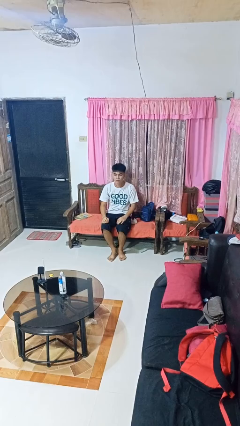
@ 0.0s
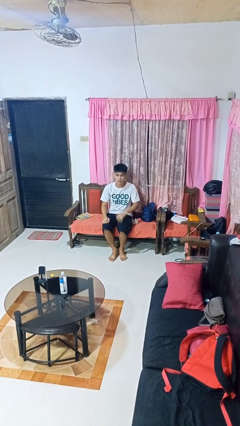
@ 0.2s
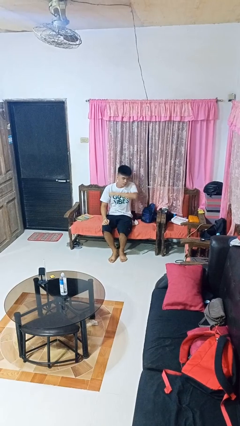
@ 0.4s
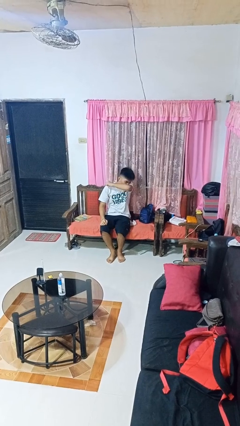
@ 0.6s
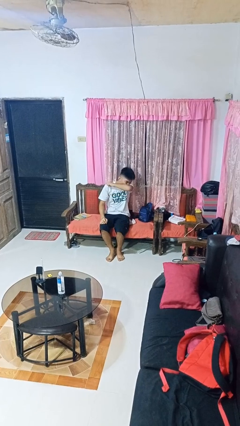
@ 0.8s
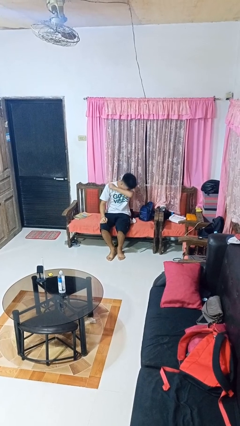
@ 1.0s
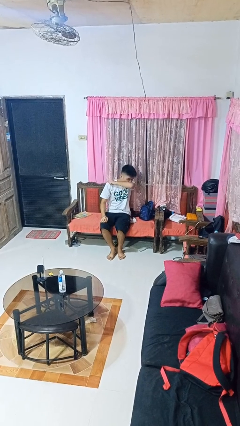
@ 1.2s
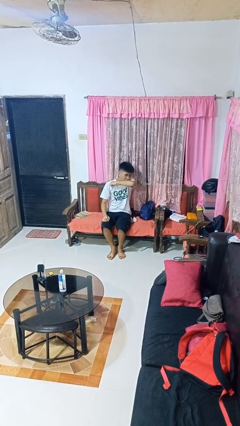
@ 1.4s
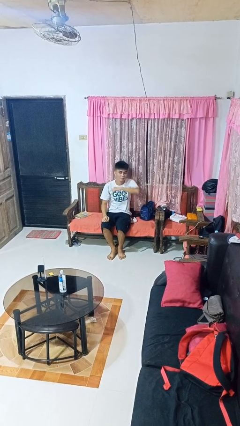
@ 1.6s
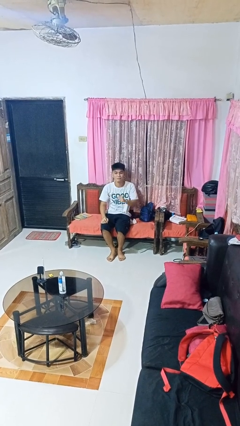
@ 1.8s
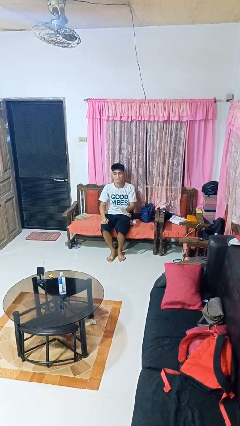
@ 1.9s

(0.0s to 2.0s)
person sneezes into arm

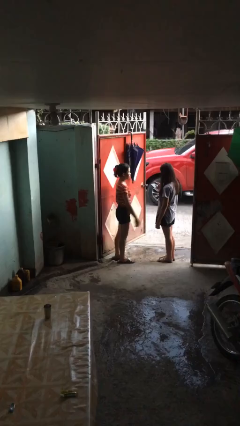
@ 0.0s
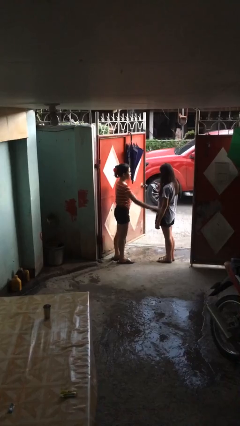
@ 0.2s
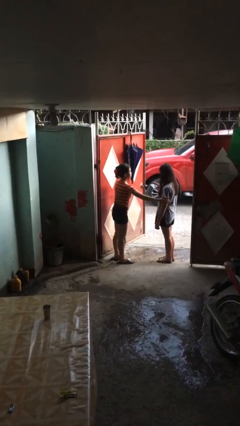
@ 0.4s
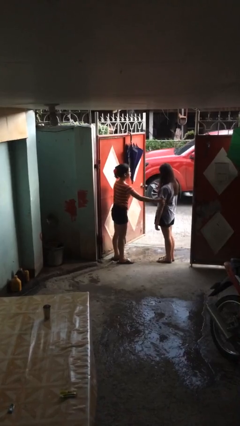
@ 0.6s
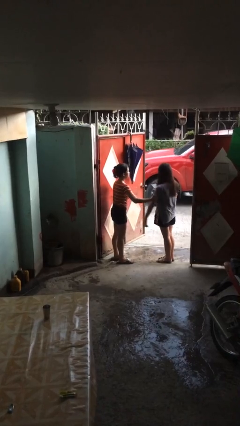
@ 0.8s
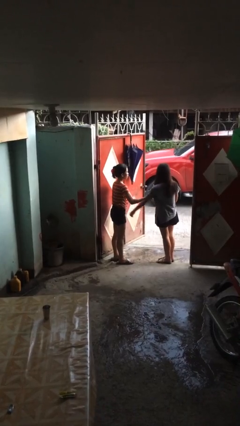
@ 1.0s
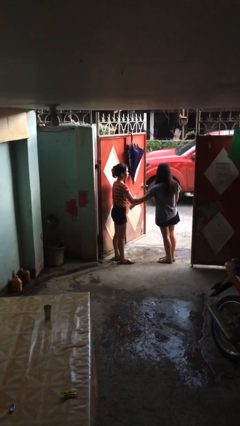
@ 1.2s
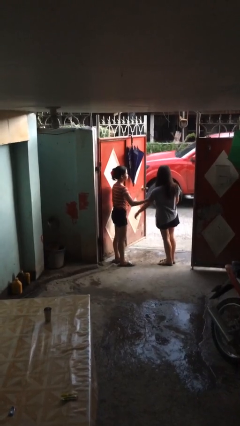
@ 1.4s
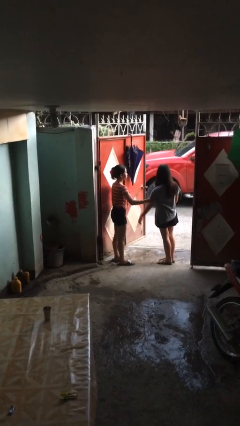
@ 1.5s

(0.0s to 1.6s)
person grabs person by bicep

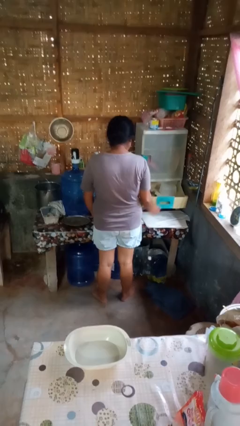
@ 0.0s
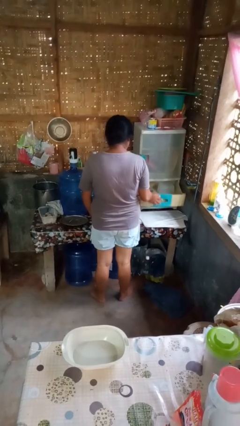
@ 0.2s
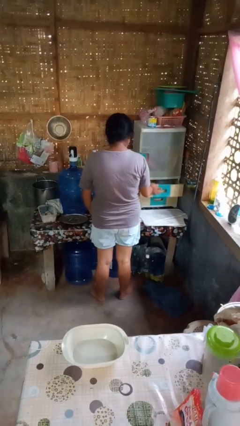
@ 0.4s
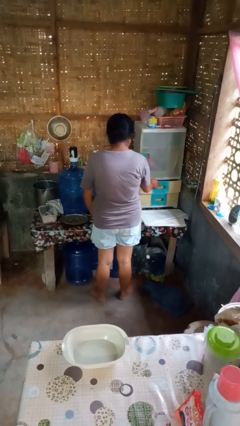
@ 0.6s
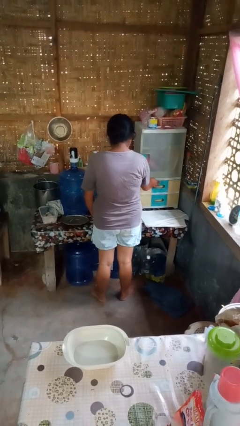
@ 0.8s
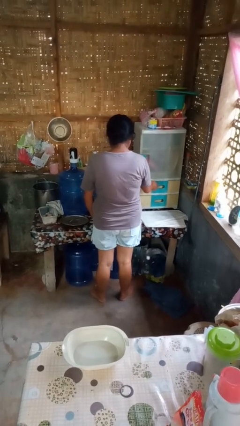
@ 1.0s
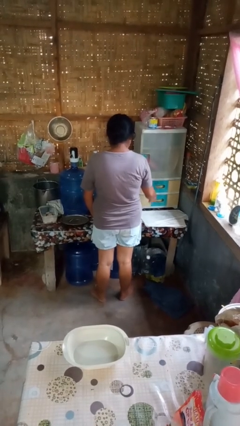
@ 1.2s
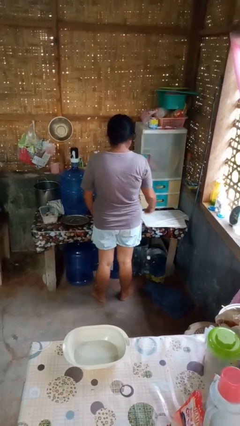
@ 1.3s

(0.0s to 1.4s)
person closes kitchen drawer

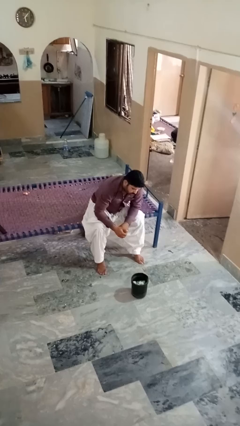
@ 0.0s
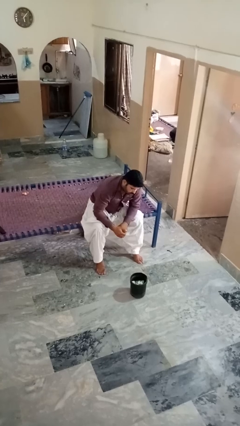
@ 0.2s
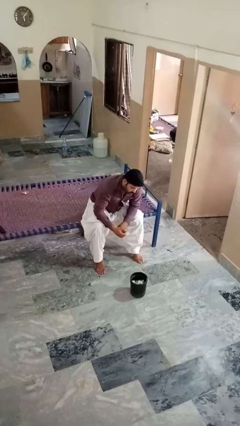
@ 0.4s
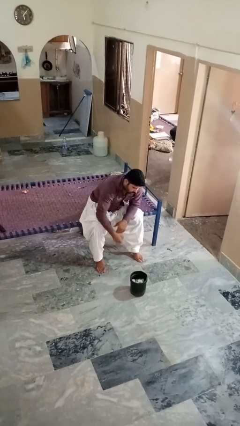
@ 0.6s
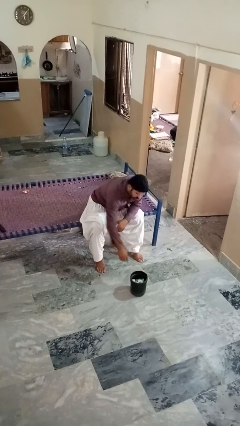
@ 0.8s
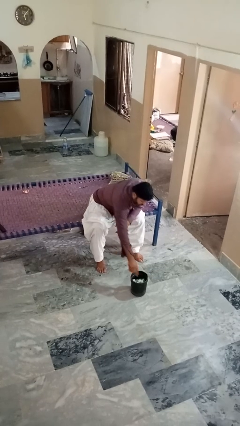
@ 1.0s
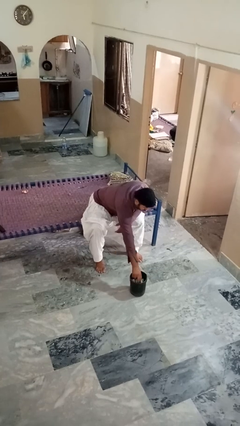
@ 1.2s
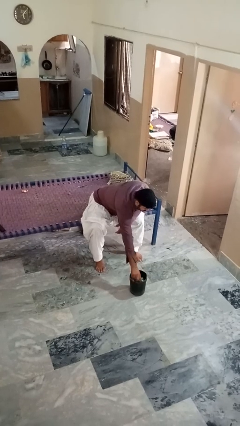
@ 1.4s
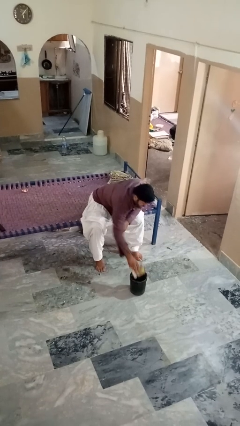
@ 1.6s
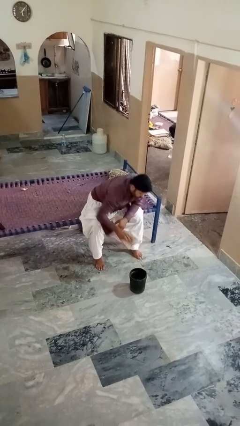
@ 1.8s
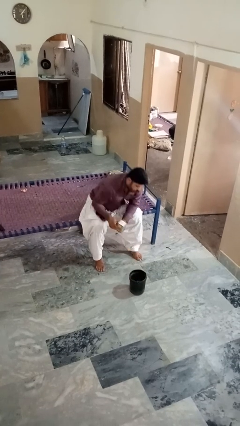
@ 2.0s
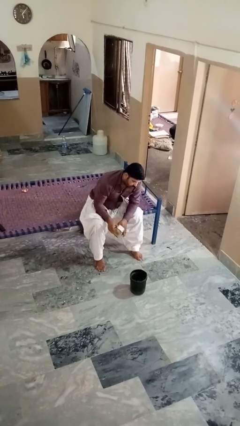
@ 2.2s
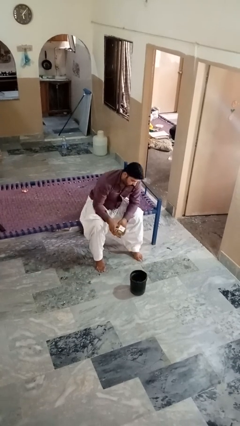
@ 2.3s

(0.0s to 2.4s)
person takes object from basket

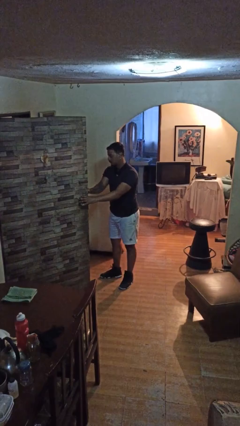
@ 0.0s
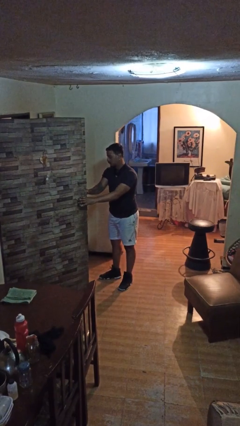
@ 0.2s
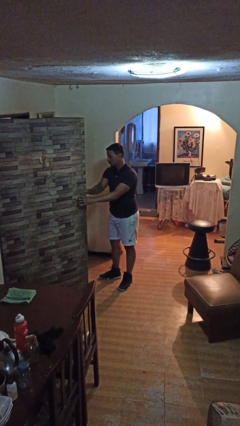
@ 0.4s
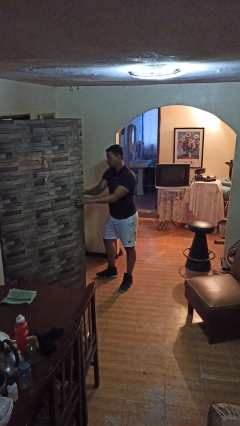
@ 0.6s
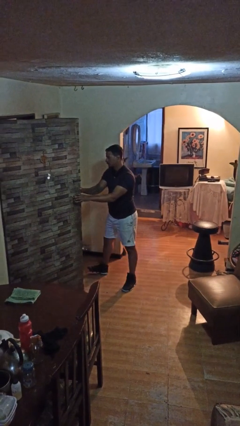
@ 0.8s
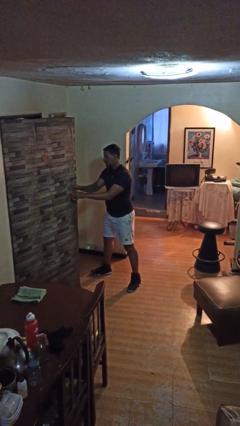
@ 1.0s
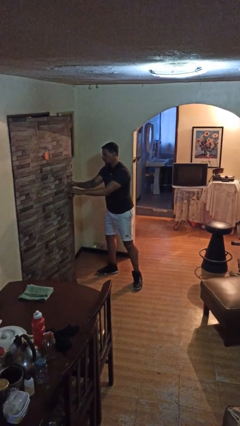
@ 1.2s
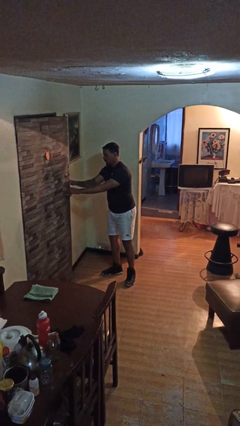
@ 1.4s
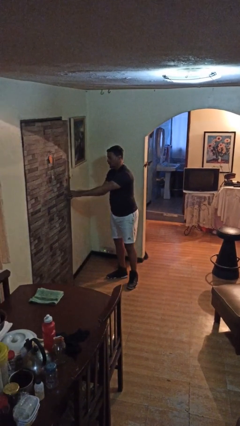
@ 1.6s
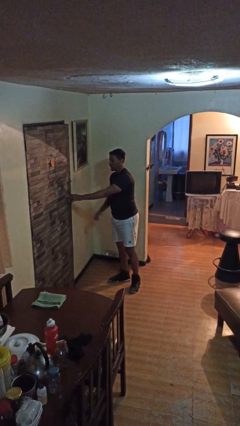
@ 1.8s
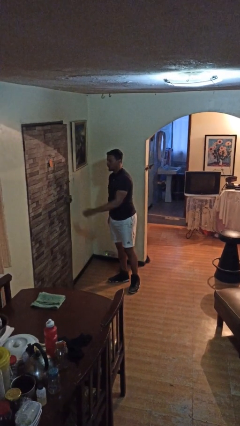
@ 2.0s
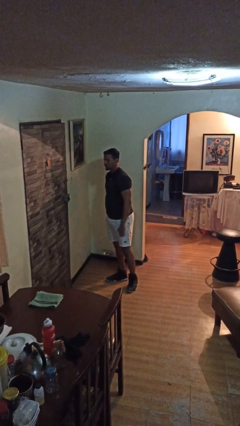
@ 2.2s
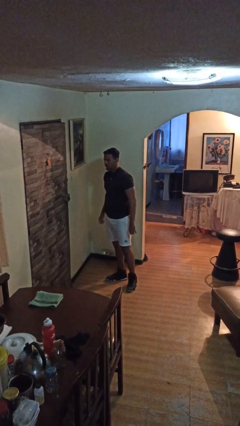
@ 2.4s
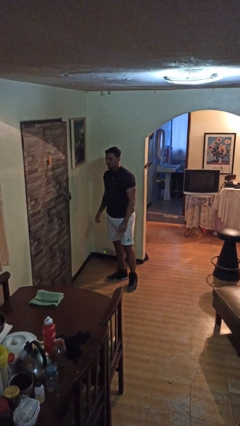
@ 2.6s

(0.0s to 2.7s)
person closes facility door

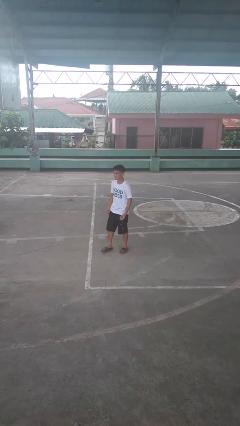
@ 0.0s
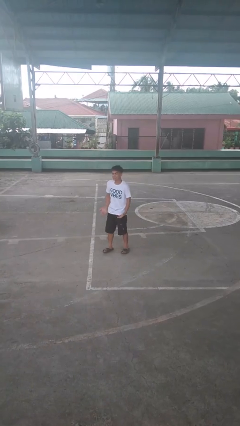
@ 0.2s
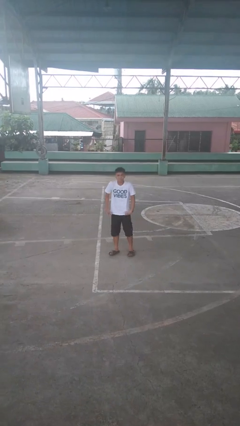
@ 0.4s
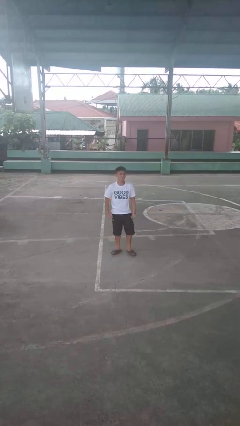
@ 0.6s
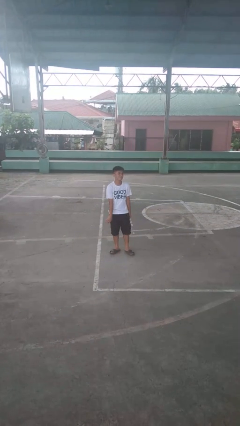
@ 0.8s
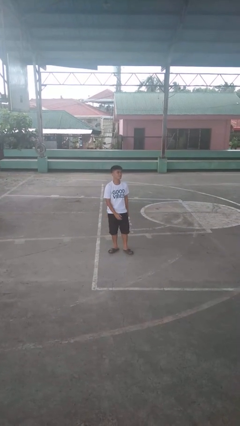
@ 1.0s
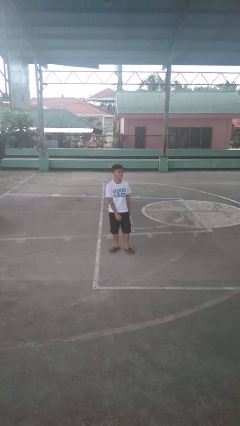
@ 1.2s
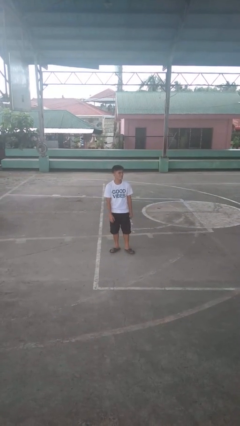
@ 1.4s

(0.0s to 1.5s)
person shrugs

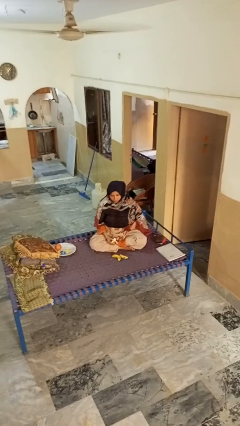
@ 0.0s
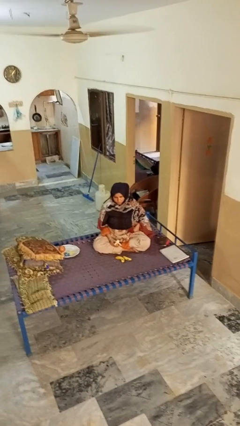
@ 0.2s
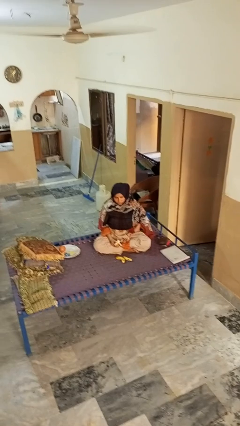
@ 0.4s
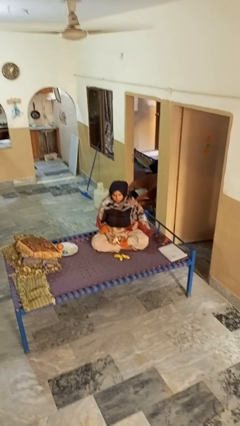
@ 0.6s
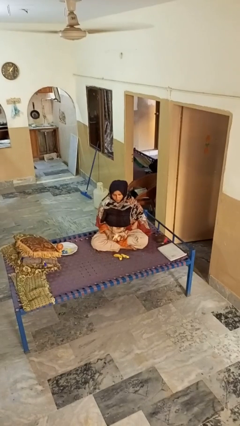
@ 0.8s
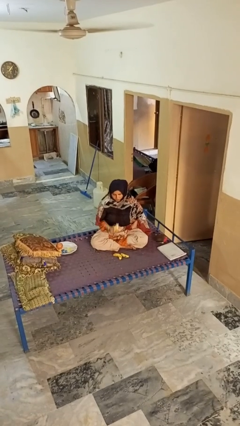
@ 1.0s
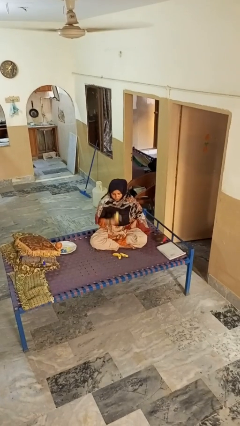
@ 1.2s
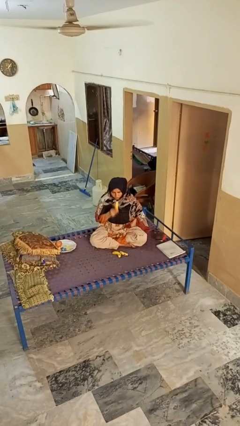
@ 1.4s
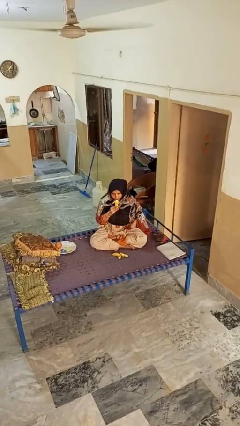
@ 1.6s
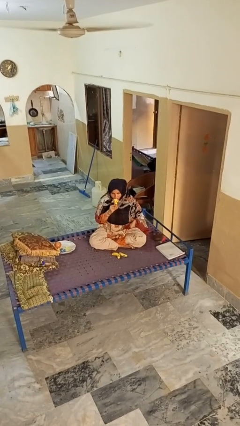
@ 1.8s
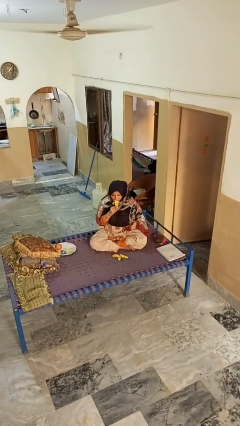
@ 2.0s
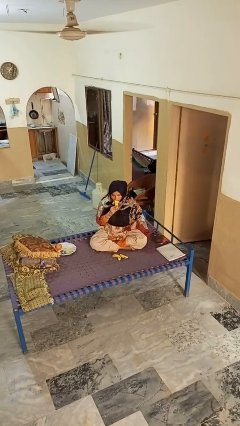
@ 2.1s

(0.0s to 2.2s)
person eats banana

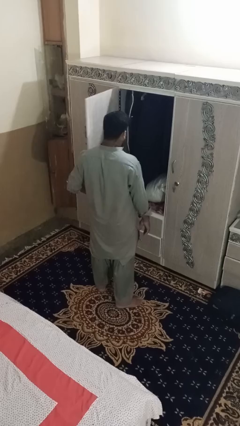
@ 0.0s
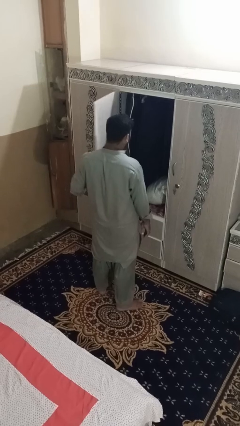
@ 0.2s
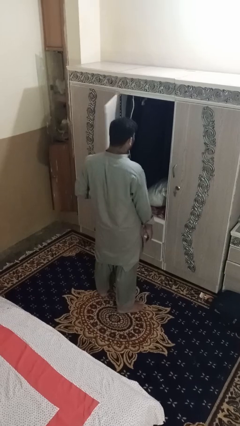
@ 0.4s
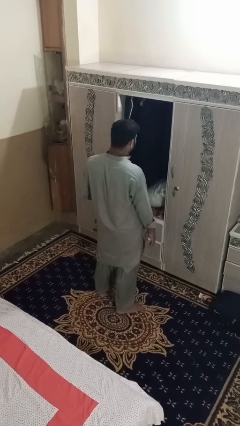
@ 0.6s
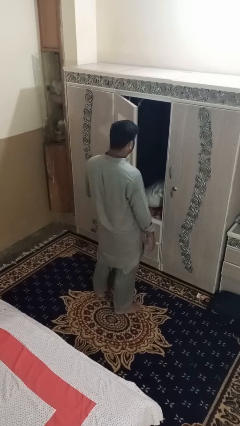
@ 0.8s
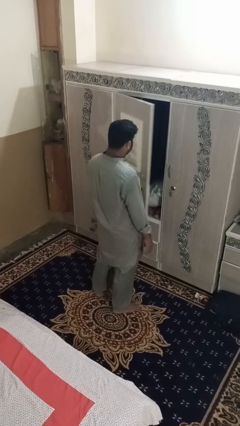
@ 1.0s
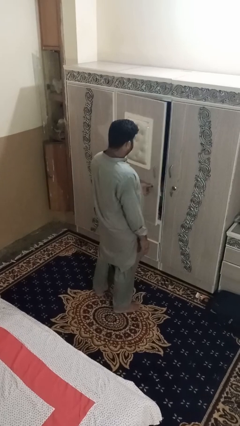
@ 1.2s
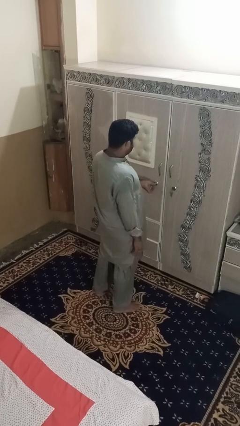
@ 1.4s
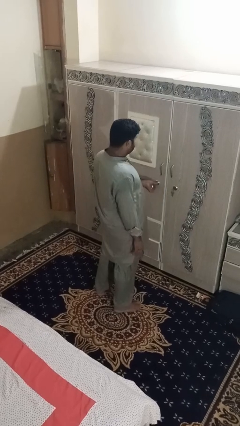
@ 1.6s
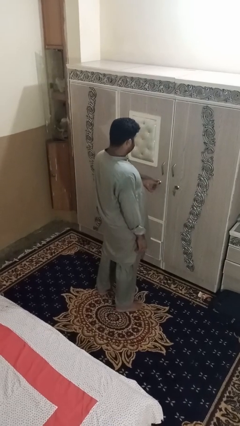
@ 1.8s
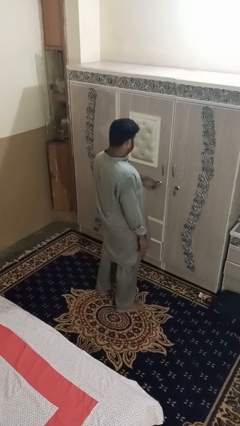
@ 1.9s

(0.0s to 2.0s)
person closes dresser drawer

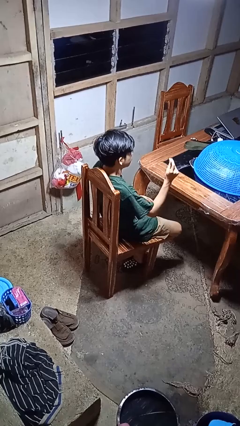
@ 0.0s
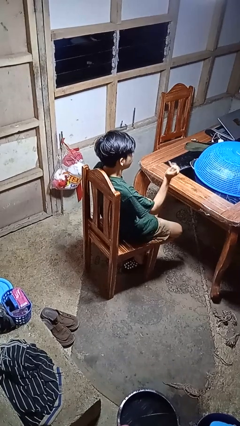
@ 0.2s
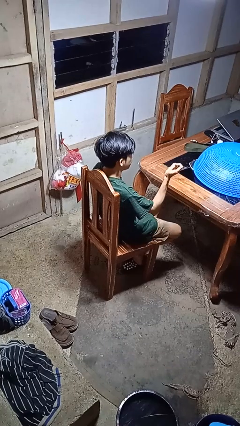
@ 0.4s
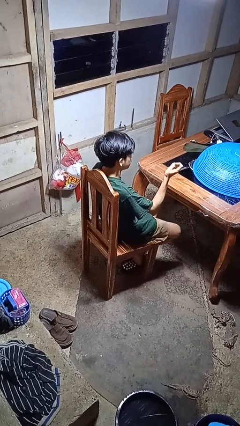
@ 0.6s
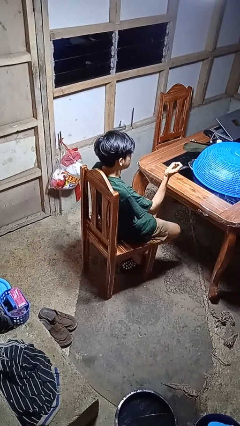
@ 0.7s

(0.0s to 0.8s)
person snaps fingers
